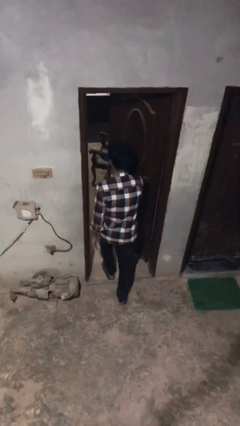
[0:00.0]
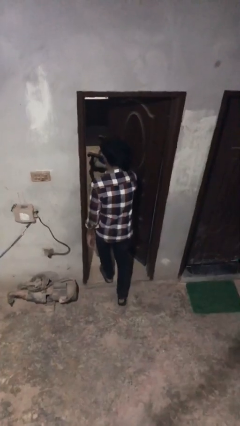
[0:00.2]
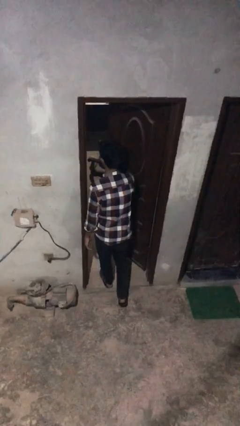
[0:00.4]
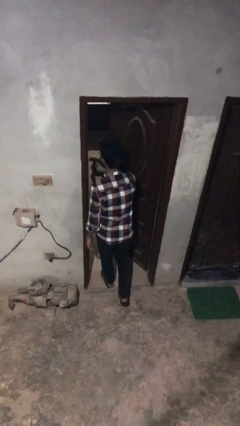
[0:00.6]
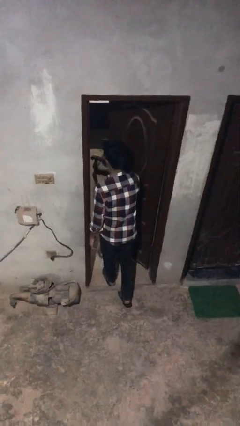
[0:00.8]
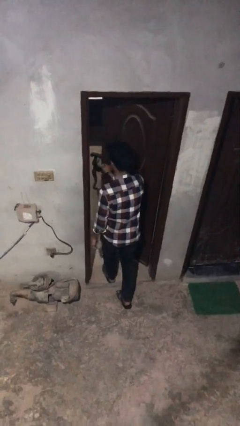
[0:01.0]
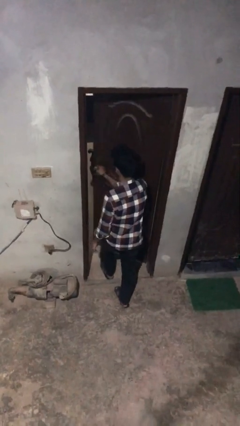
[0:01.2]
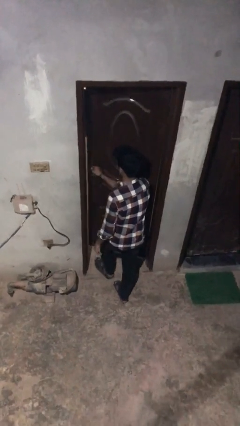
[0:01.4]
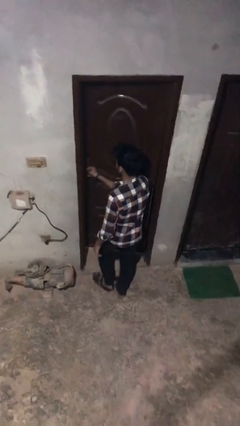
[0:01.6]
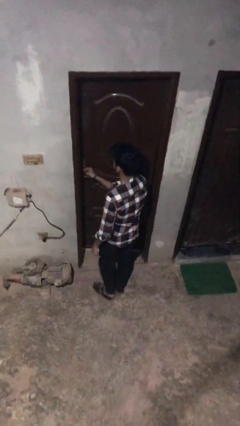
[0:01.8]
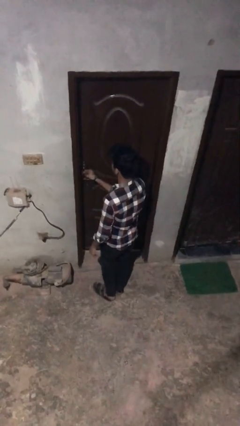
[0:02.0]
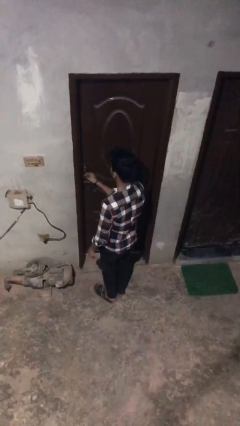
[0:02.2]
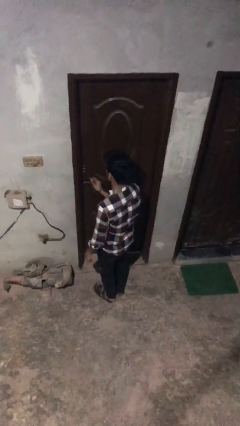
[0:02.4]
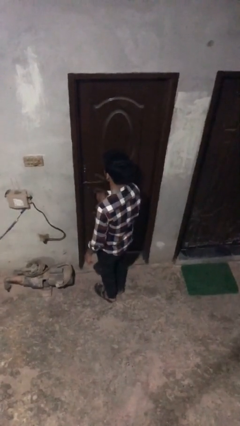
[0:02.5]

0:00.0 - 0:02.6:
person closes facility door

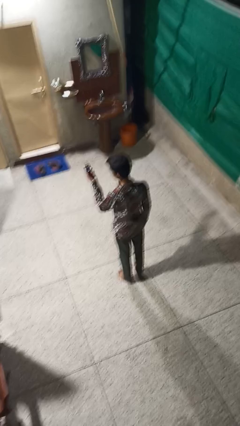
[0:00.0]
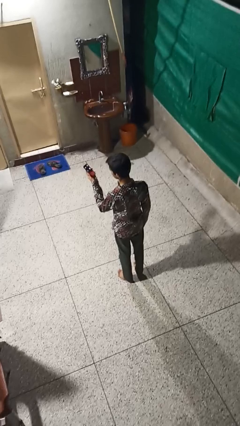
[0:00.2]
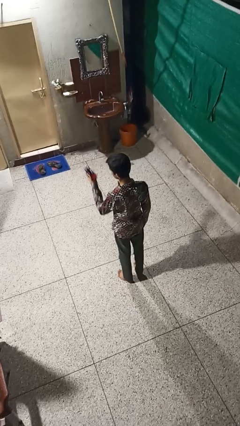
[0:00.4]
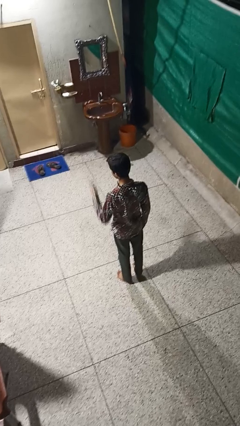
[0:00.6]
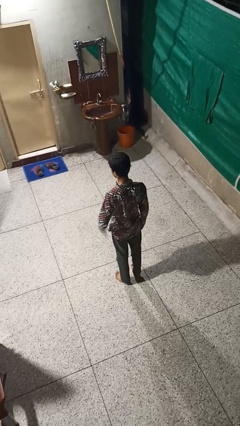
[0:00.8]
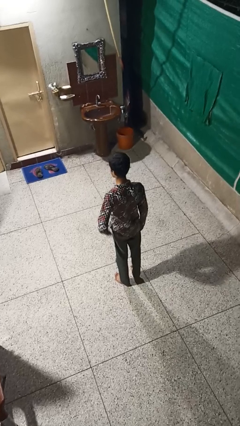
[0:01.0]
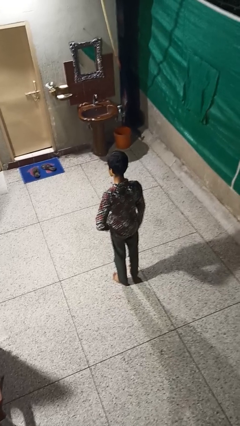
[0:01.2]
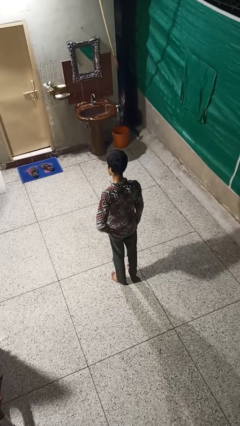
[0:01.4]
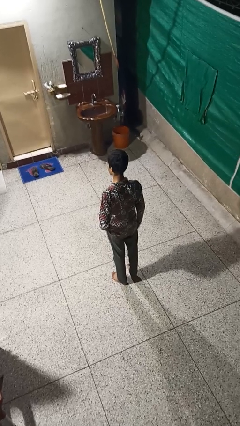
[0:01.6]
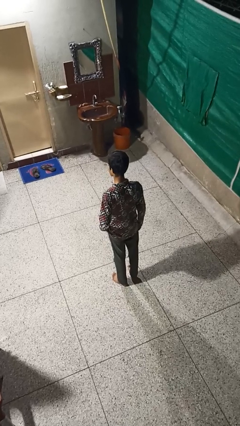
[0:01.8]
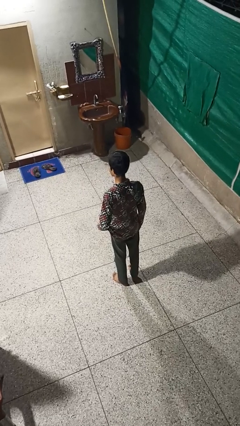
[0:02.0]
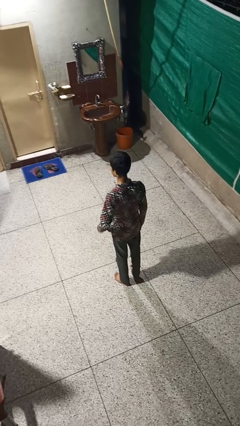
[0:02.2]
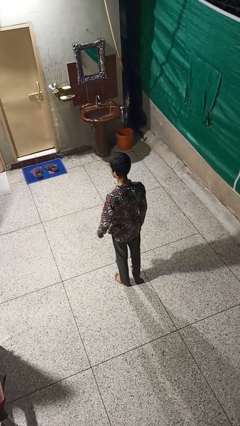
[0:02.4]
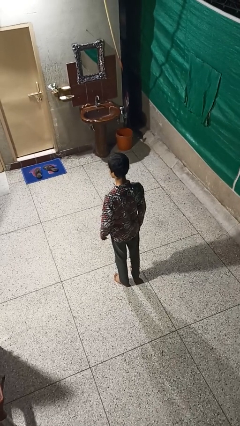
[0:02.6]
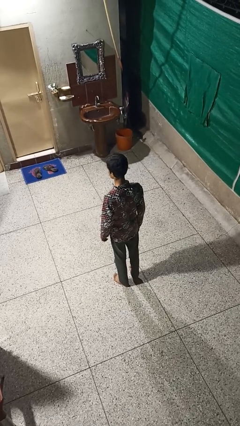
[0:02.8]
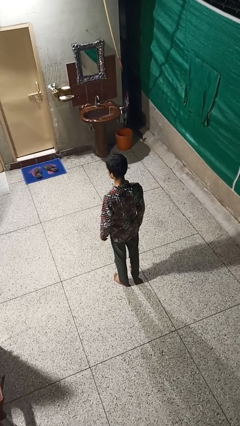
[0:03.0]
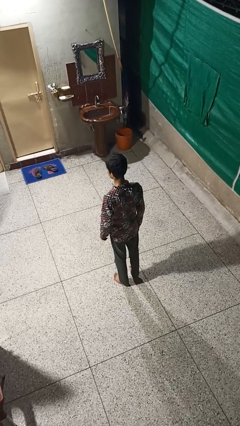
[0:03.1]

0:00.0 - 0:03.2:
person puts phone into pocket

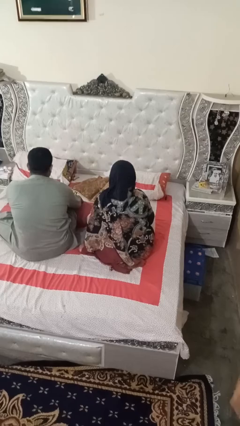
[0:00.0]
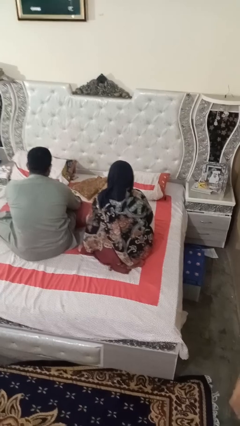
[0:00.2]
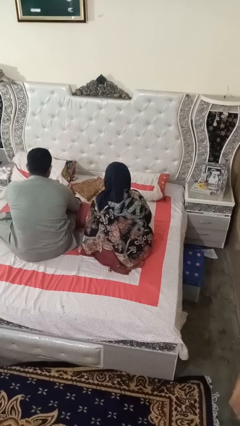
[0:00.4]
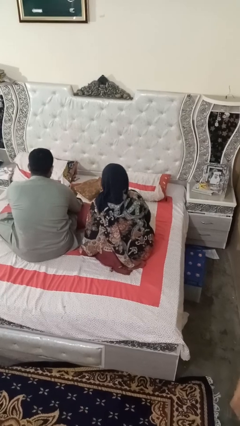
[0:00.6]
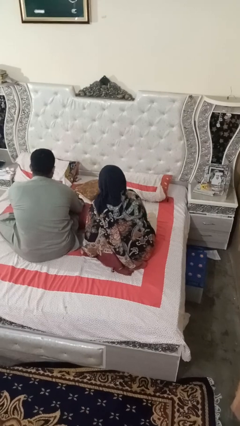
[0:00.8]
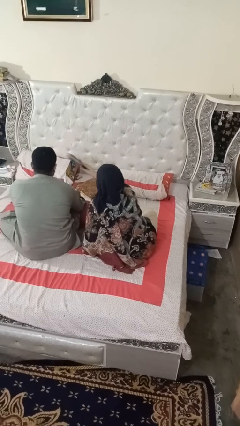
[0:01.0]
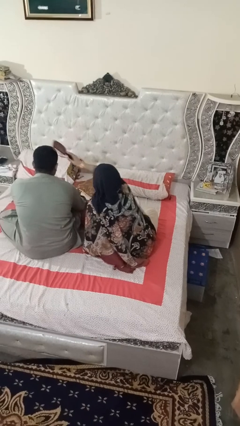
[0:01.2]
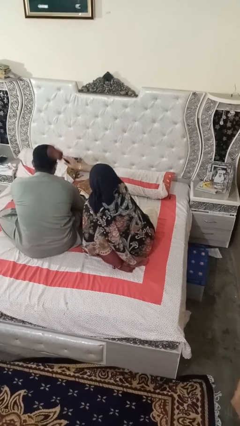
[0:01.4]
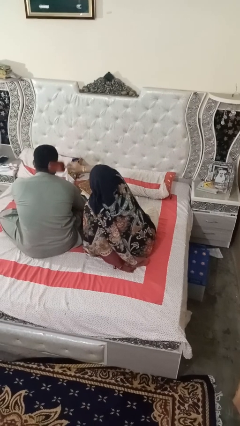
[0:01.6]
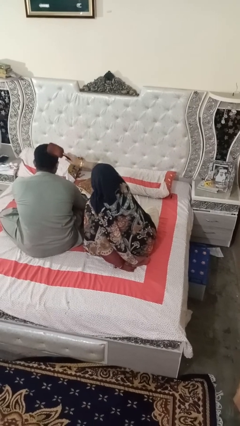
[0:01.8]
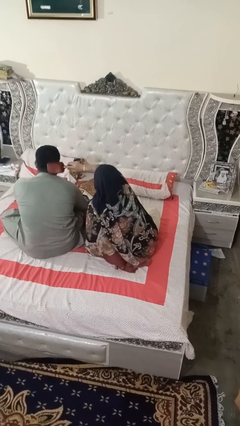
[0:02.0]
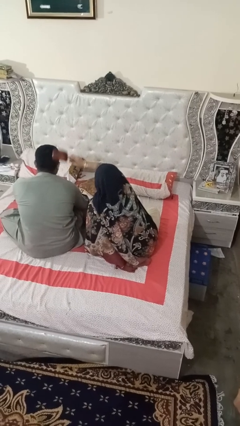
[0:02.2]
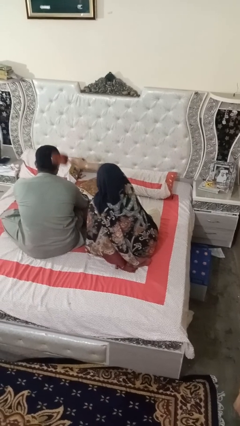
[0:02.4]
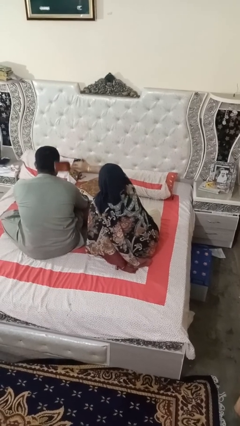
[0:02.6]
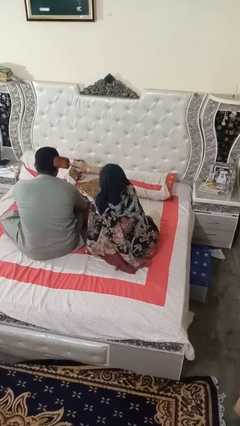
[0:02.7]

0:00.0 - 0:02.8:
person brushes hair of person

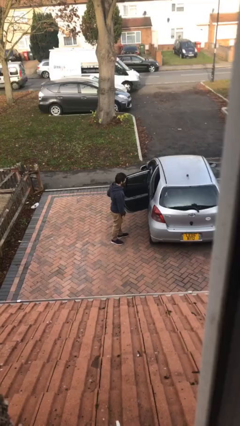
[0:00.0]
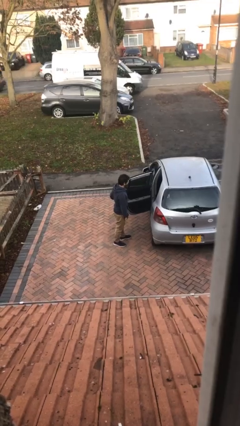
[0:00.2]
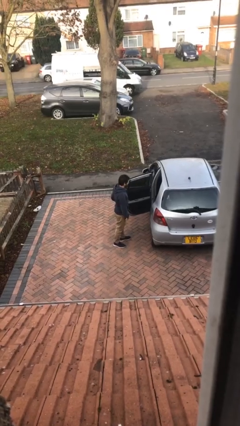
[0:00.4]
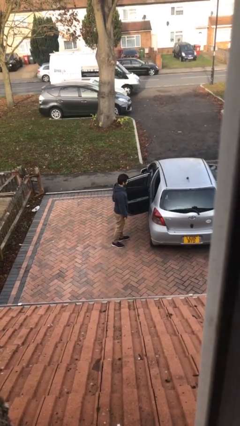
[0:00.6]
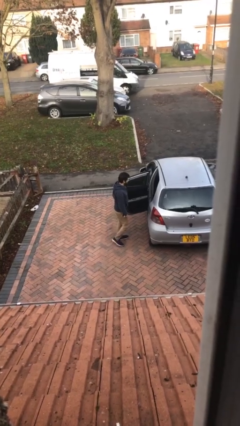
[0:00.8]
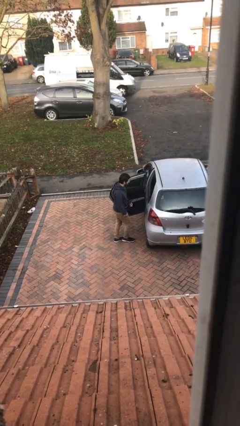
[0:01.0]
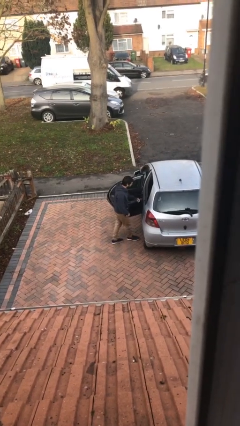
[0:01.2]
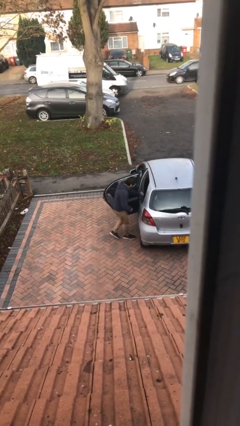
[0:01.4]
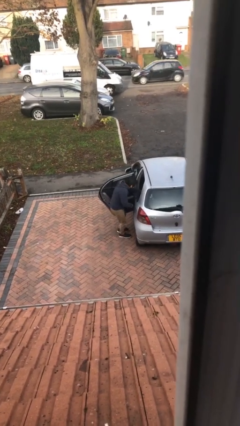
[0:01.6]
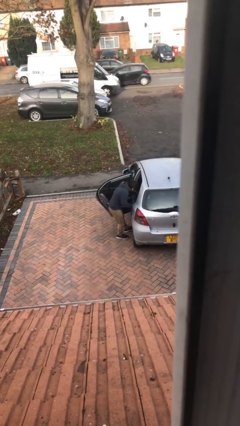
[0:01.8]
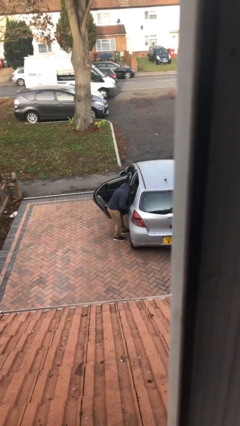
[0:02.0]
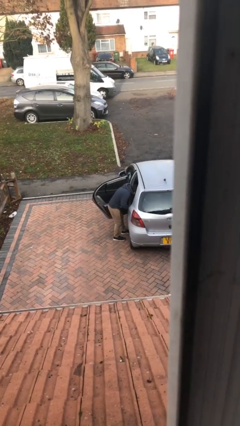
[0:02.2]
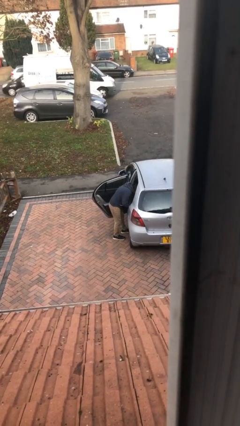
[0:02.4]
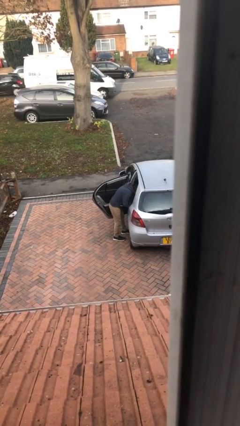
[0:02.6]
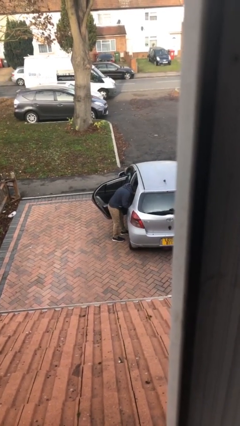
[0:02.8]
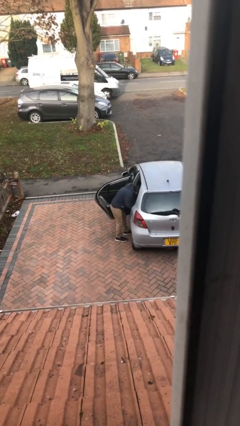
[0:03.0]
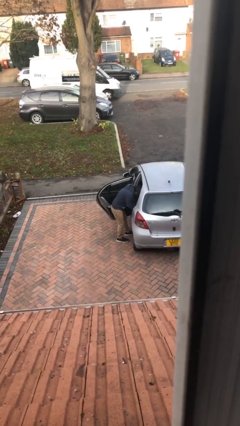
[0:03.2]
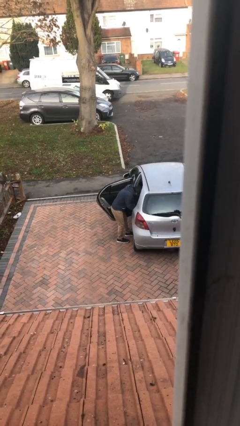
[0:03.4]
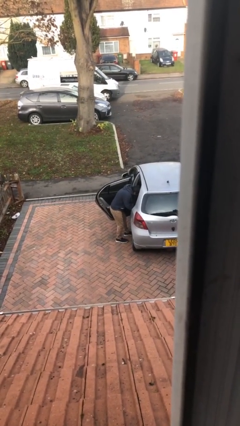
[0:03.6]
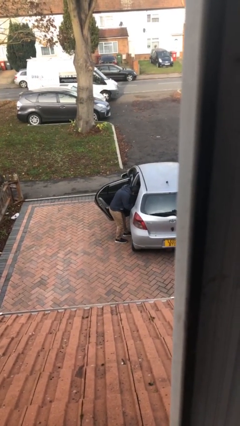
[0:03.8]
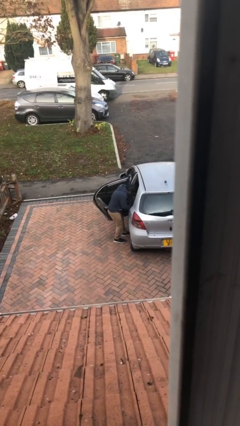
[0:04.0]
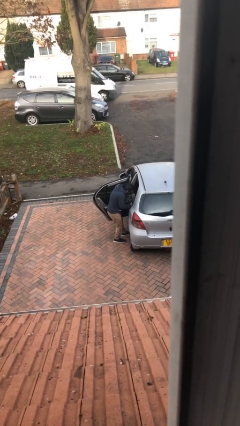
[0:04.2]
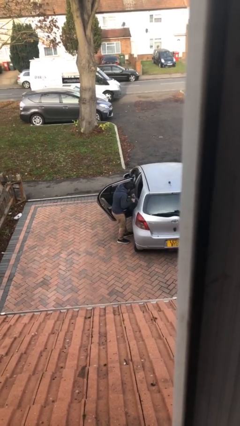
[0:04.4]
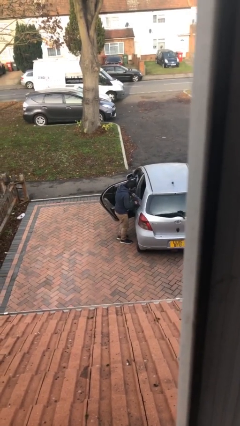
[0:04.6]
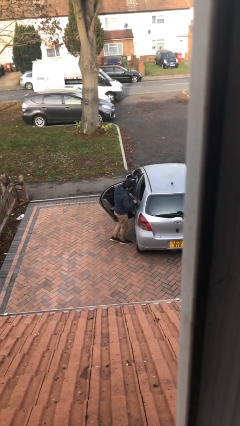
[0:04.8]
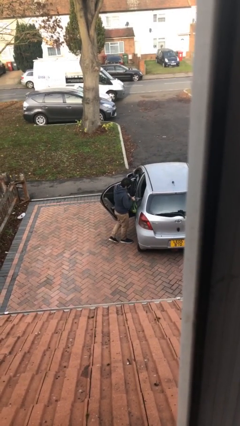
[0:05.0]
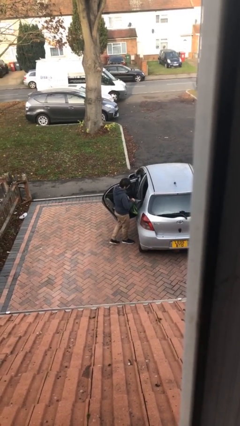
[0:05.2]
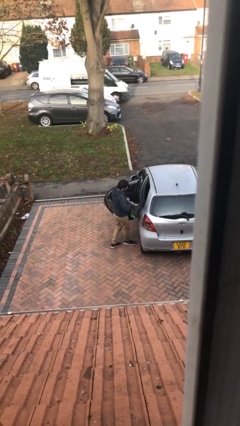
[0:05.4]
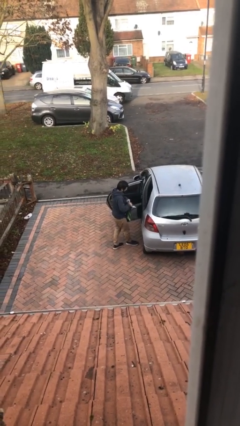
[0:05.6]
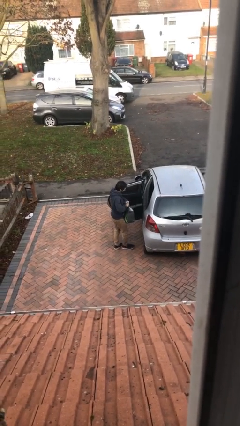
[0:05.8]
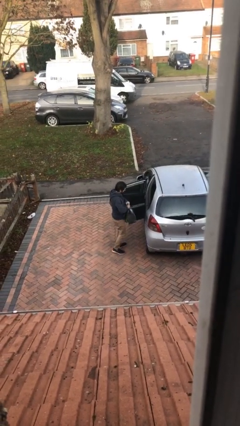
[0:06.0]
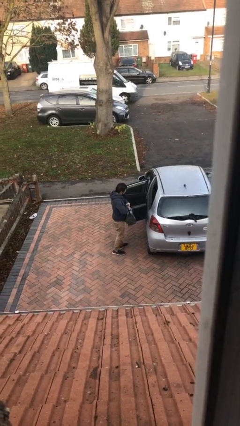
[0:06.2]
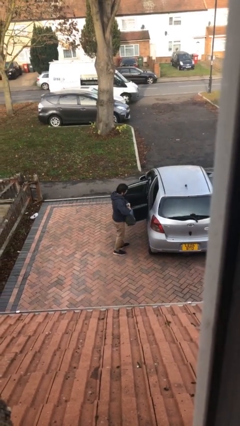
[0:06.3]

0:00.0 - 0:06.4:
person unloads car

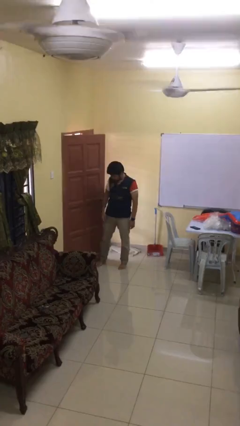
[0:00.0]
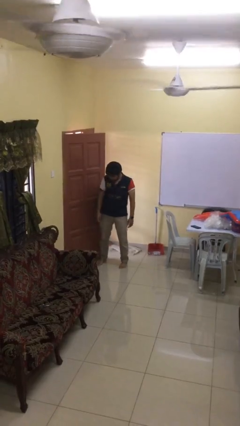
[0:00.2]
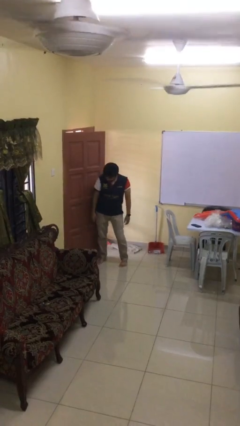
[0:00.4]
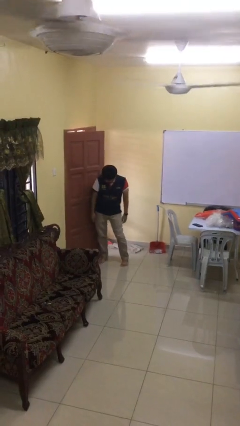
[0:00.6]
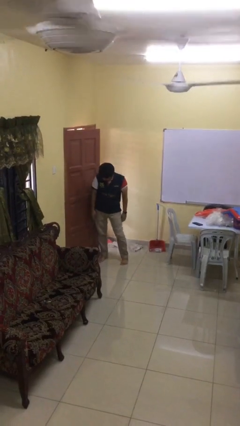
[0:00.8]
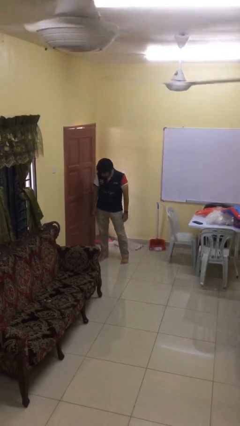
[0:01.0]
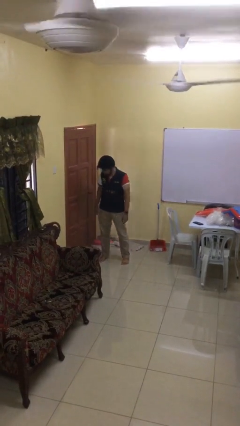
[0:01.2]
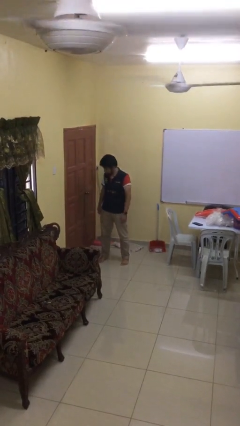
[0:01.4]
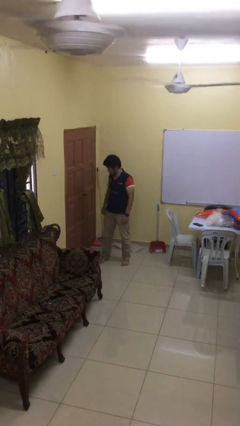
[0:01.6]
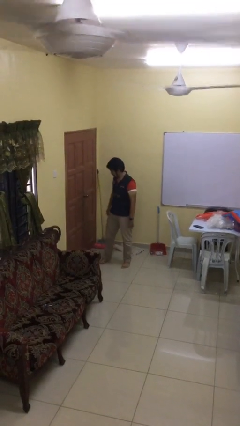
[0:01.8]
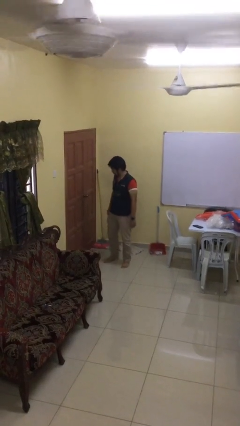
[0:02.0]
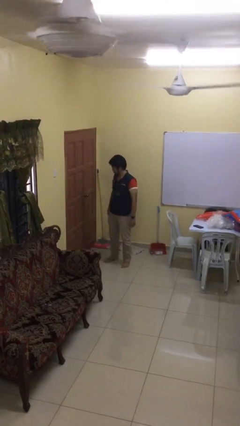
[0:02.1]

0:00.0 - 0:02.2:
person closes door with hip

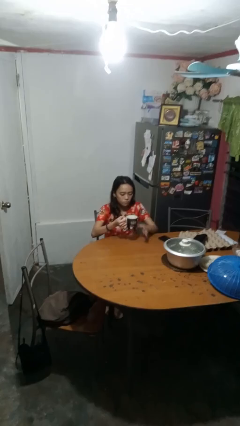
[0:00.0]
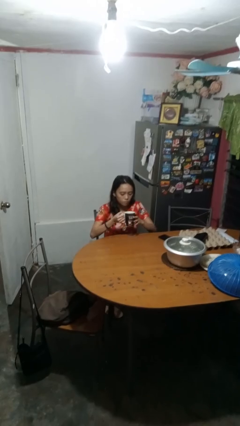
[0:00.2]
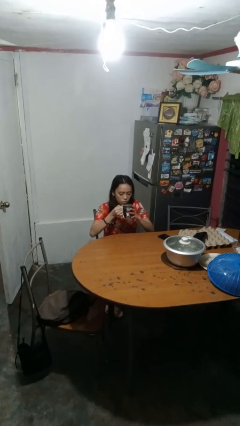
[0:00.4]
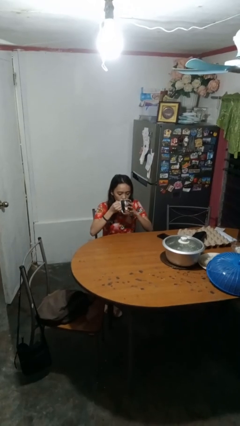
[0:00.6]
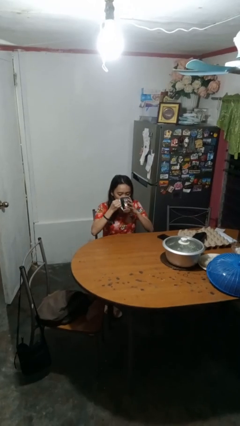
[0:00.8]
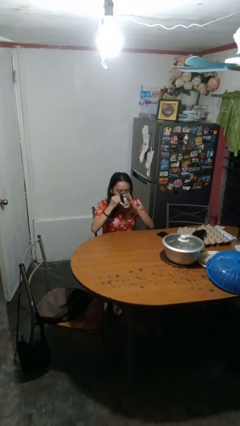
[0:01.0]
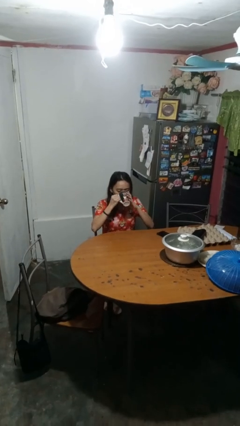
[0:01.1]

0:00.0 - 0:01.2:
person drinks from mug
